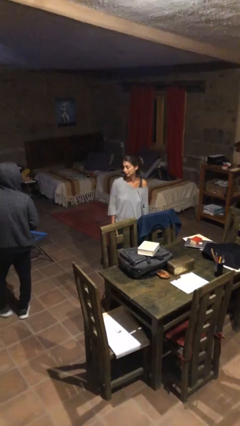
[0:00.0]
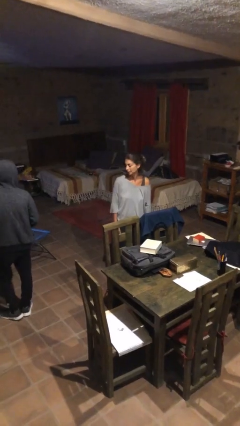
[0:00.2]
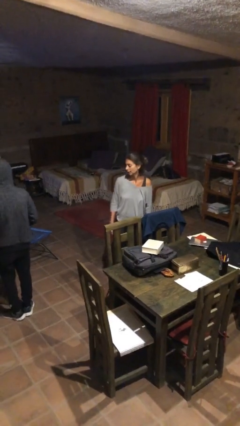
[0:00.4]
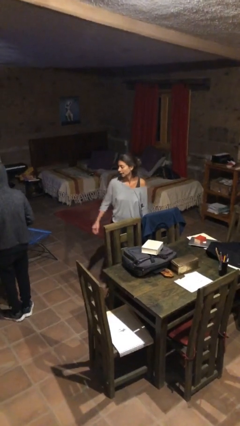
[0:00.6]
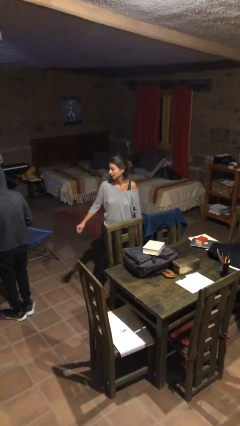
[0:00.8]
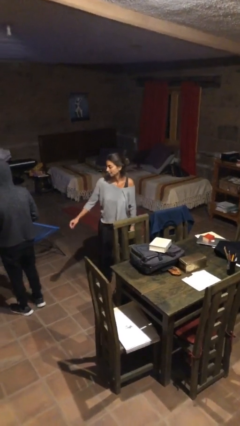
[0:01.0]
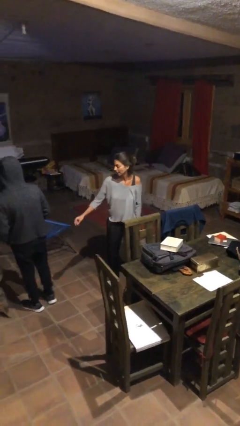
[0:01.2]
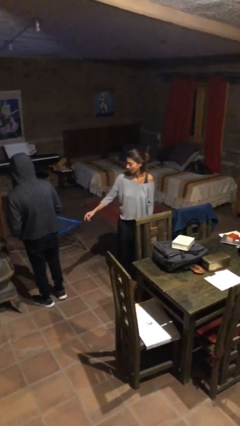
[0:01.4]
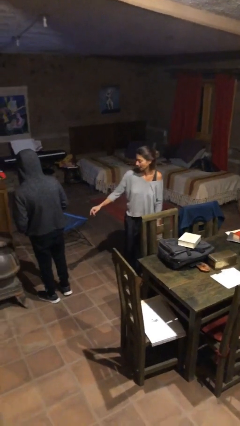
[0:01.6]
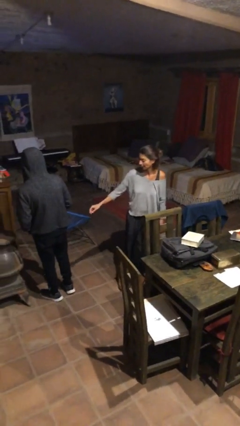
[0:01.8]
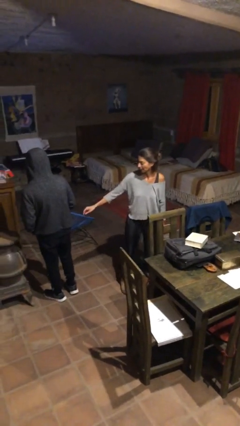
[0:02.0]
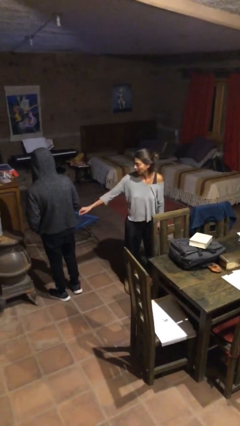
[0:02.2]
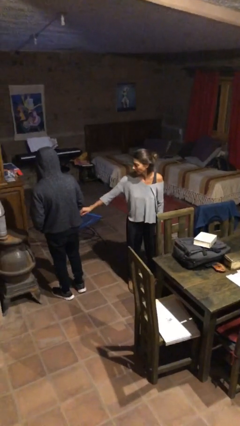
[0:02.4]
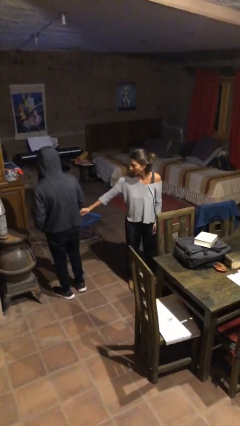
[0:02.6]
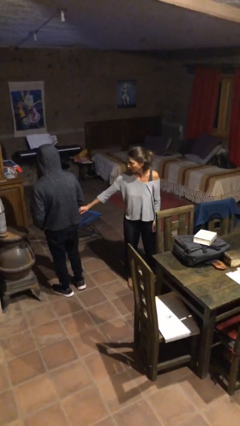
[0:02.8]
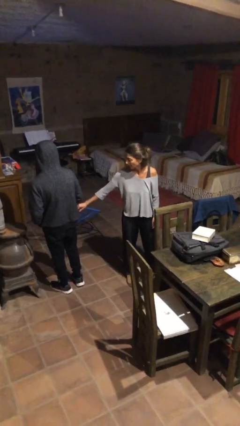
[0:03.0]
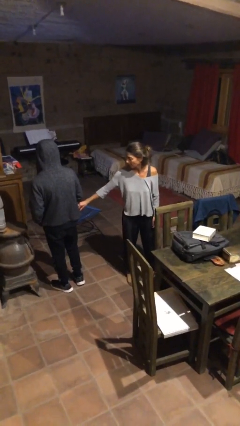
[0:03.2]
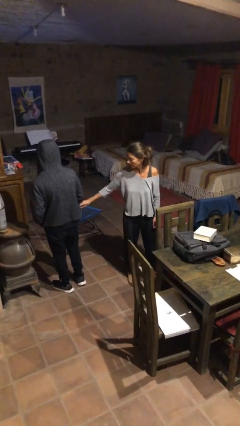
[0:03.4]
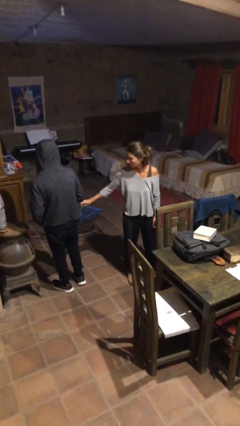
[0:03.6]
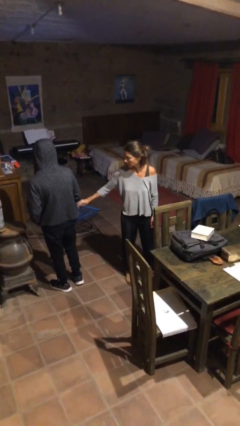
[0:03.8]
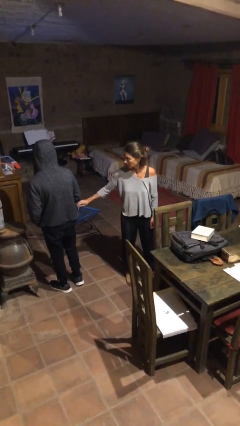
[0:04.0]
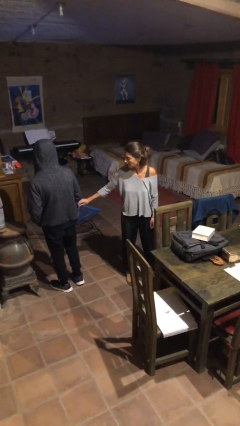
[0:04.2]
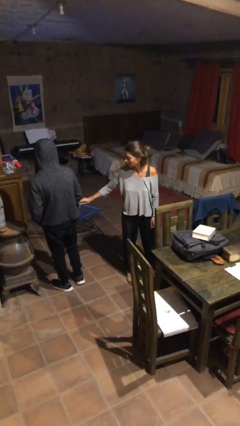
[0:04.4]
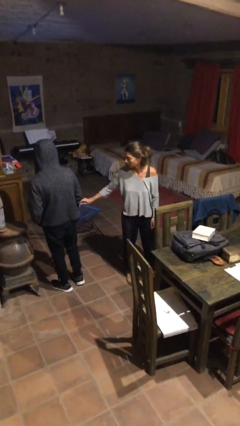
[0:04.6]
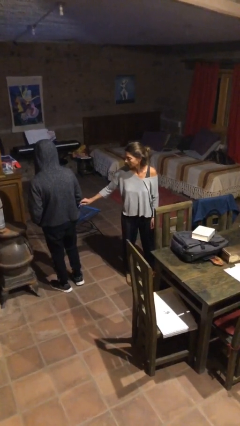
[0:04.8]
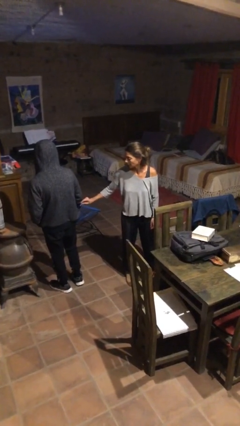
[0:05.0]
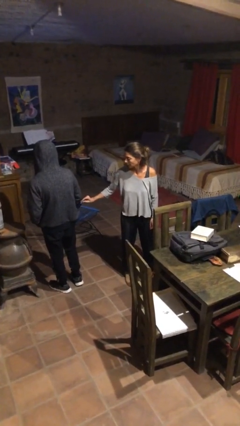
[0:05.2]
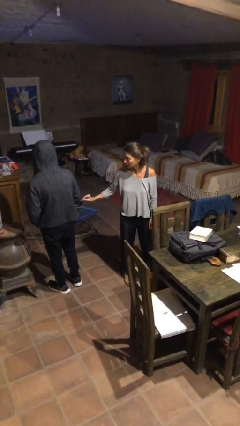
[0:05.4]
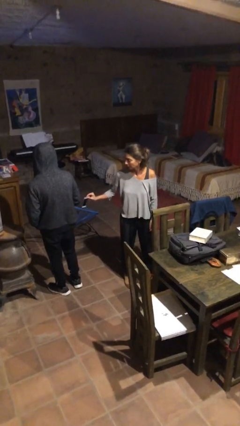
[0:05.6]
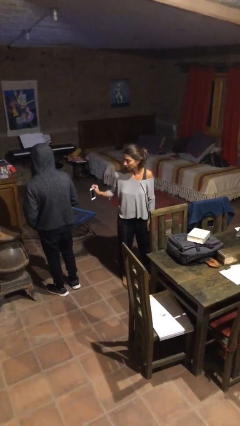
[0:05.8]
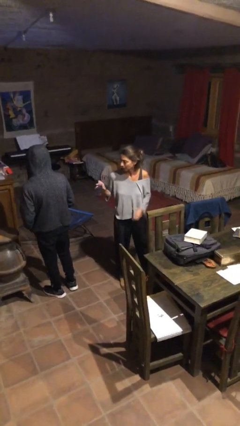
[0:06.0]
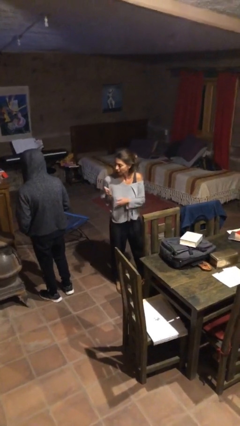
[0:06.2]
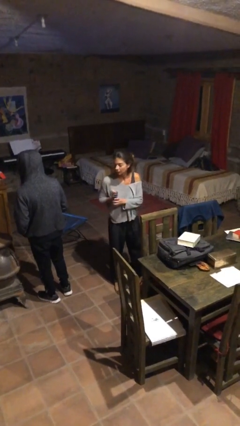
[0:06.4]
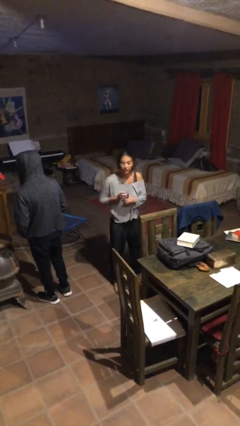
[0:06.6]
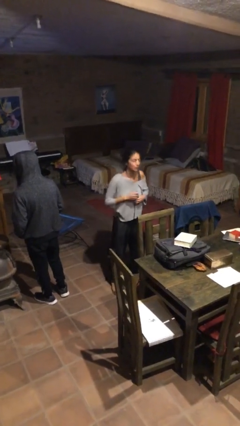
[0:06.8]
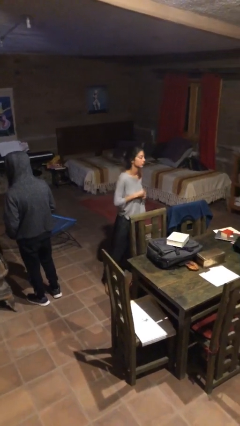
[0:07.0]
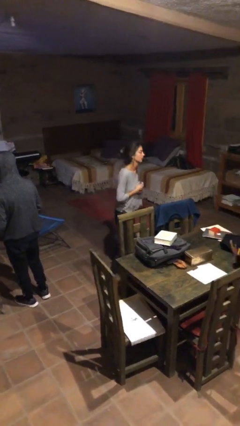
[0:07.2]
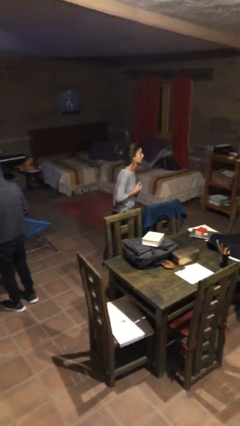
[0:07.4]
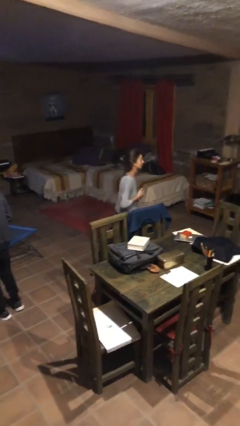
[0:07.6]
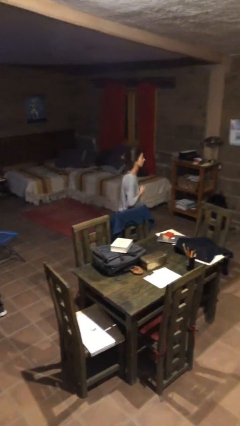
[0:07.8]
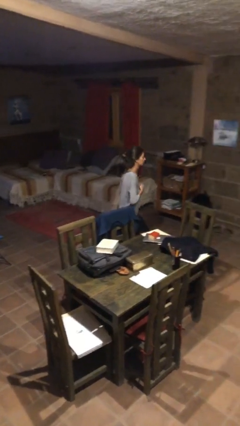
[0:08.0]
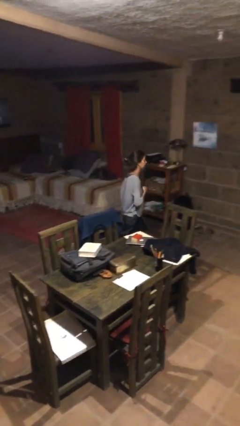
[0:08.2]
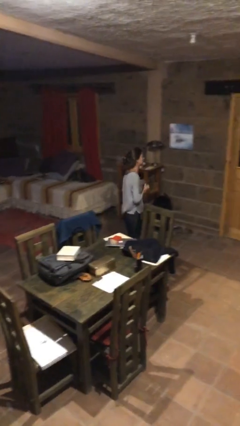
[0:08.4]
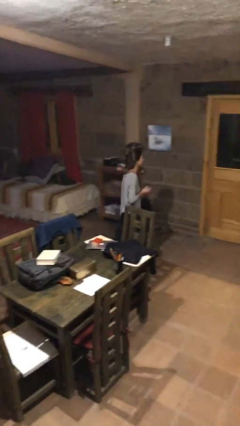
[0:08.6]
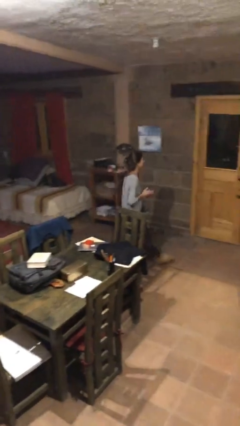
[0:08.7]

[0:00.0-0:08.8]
person steals object from person

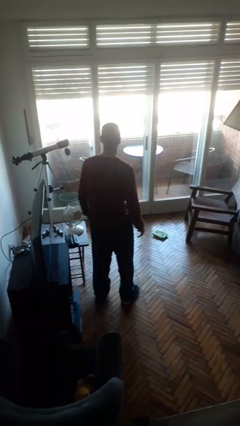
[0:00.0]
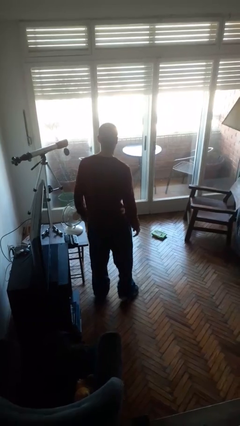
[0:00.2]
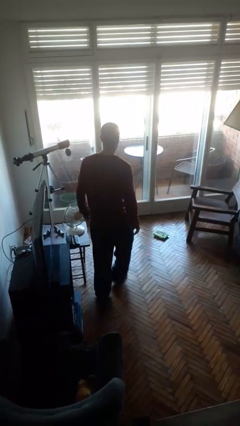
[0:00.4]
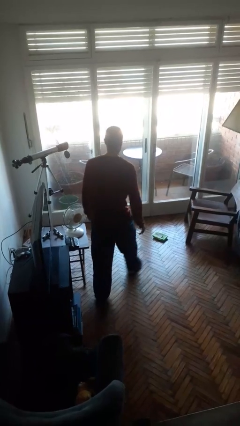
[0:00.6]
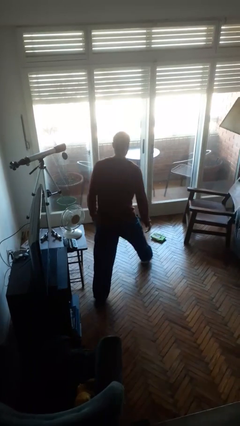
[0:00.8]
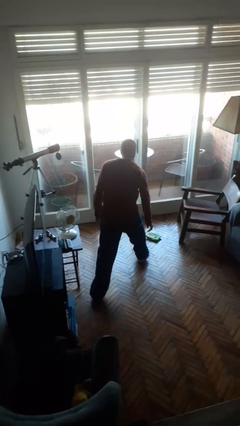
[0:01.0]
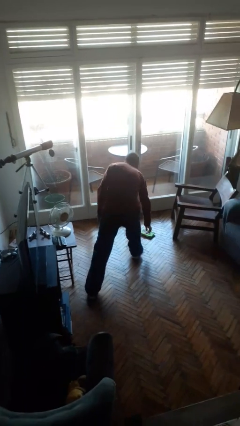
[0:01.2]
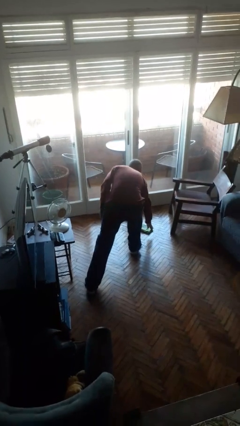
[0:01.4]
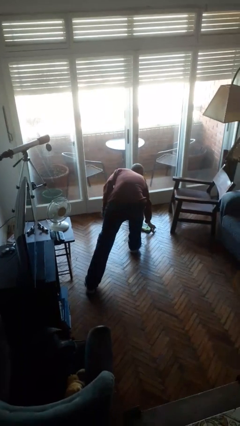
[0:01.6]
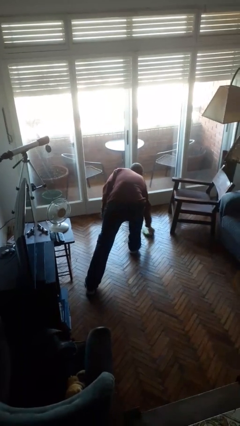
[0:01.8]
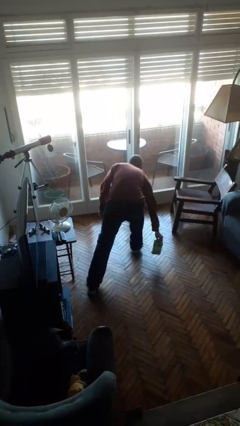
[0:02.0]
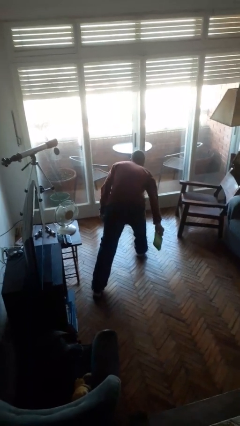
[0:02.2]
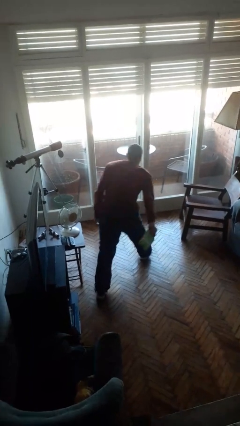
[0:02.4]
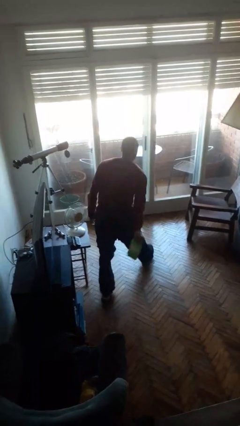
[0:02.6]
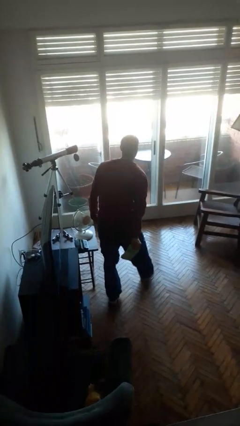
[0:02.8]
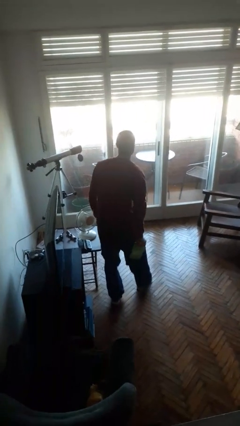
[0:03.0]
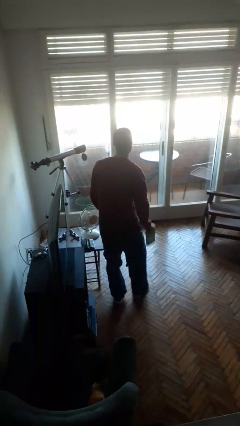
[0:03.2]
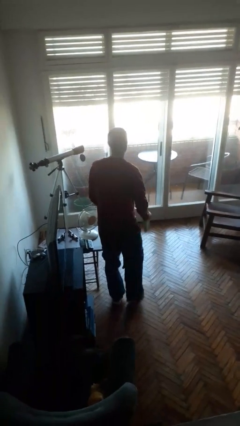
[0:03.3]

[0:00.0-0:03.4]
person picks up object from floor

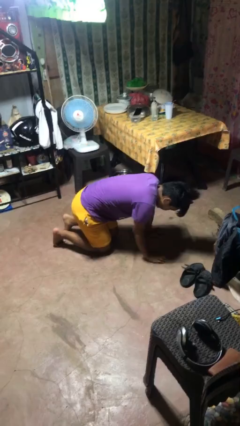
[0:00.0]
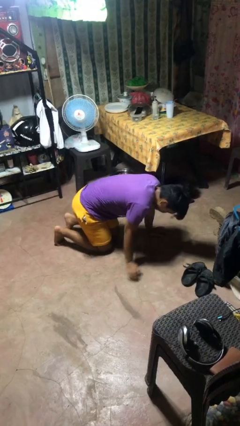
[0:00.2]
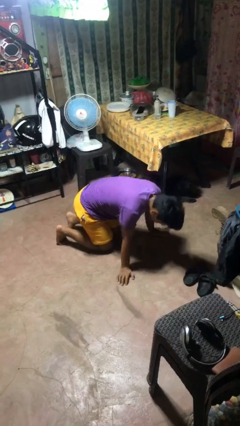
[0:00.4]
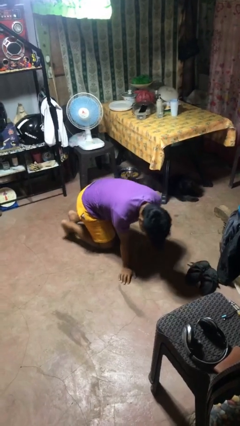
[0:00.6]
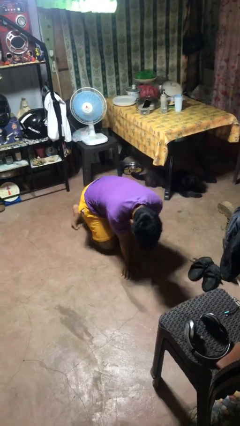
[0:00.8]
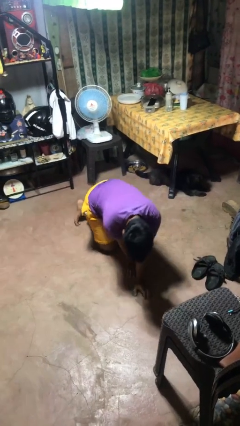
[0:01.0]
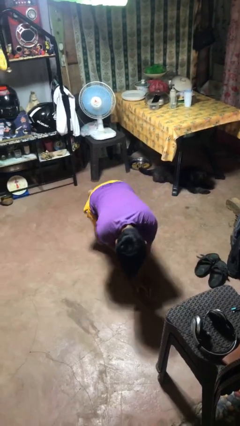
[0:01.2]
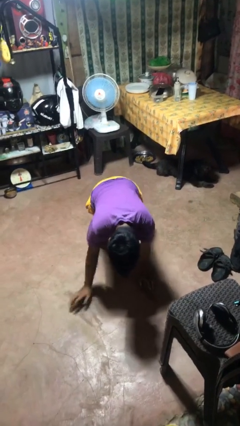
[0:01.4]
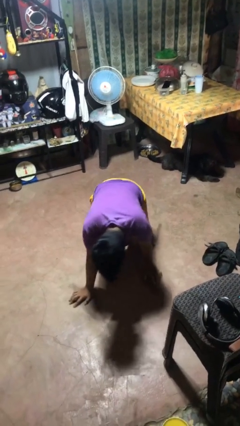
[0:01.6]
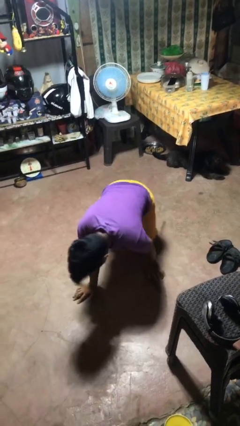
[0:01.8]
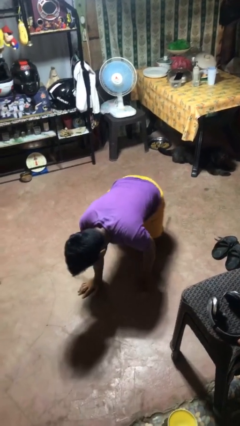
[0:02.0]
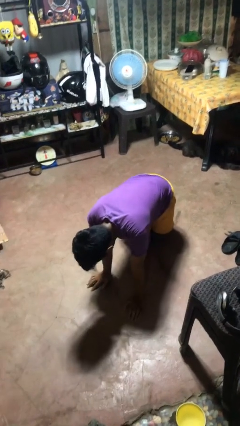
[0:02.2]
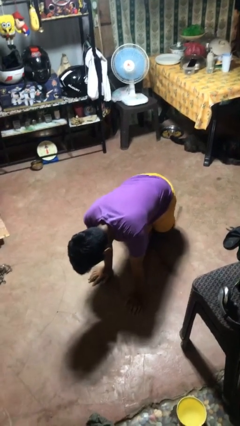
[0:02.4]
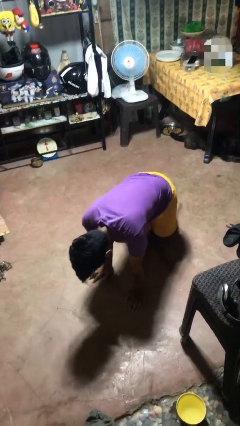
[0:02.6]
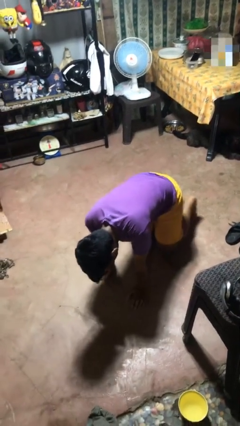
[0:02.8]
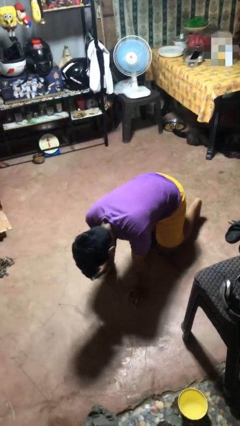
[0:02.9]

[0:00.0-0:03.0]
person crawls

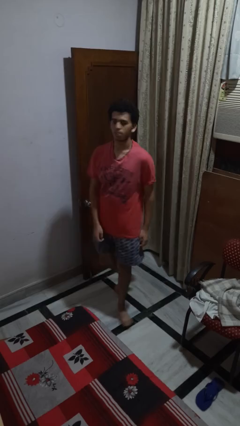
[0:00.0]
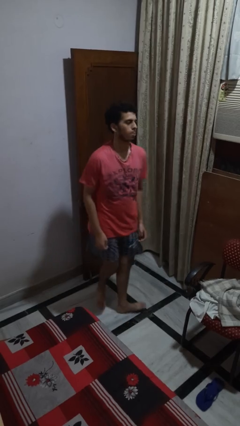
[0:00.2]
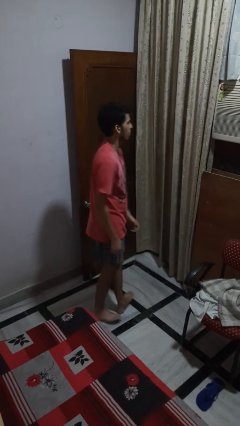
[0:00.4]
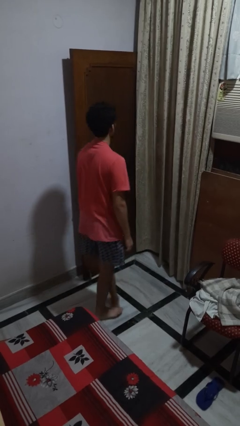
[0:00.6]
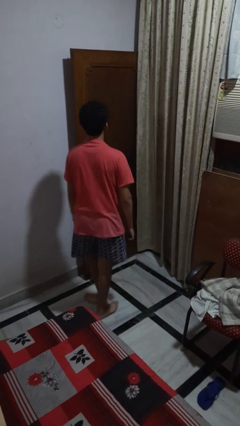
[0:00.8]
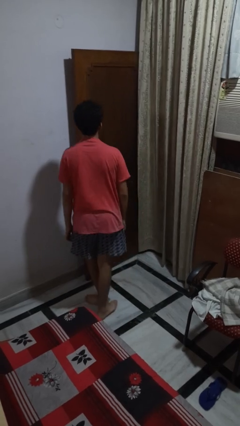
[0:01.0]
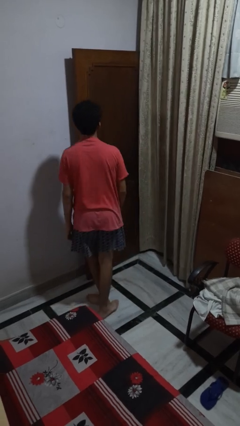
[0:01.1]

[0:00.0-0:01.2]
person twirls

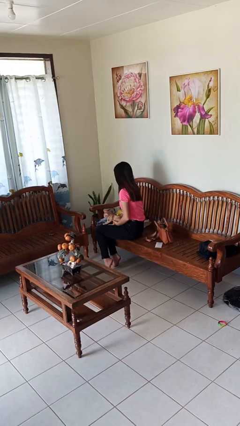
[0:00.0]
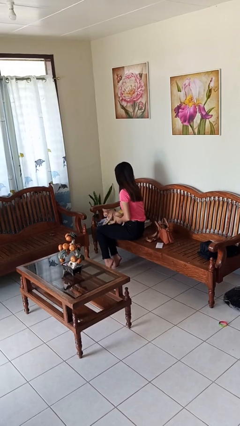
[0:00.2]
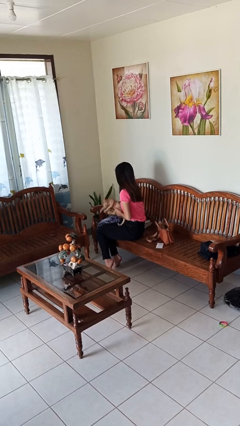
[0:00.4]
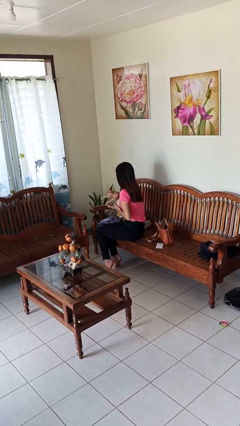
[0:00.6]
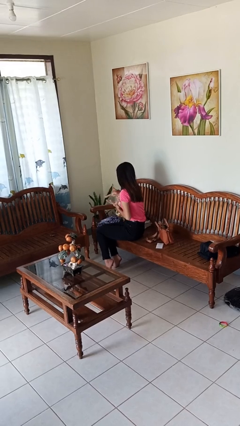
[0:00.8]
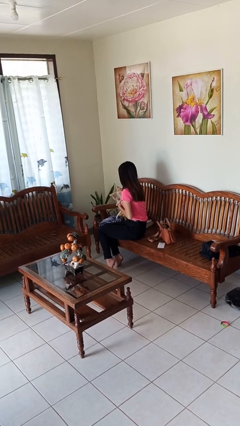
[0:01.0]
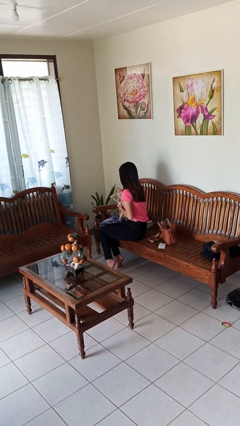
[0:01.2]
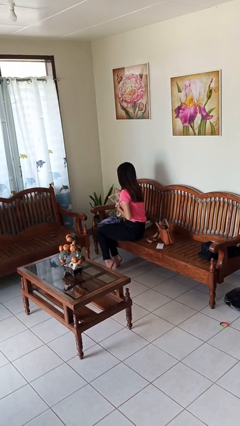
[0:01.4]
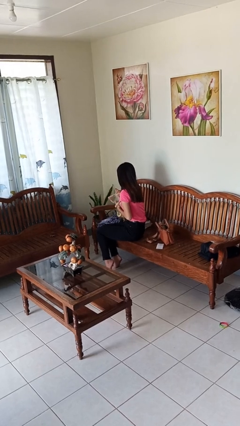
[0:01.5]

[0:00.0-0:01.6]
person hugs cat
